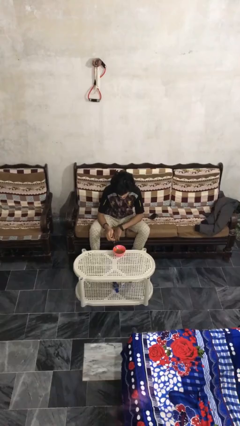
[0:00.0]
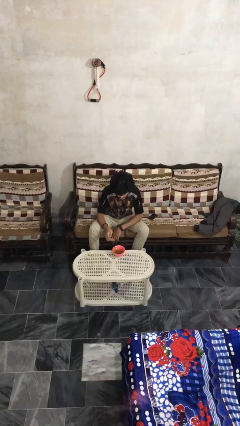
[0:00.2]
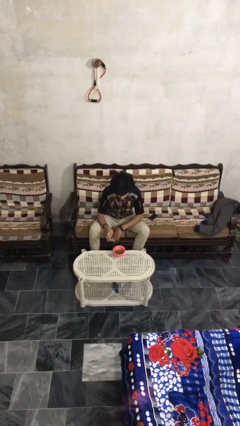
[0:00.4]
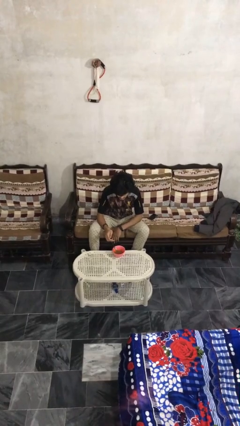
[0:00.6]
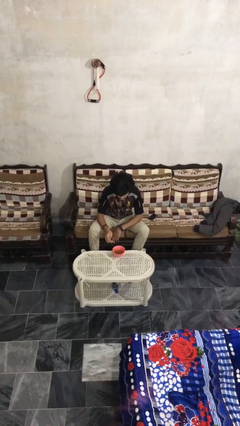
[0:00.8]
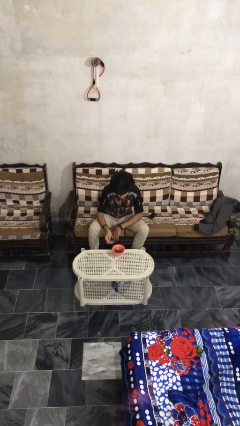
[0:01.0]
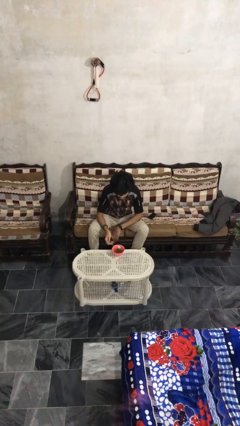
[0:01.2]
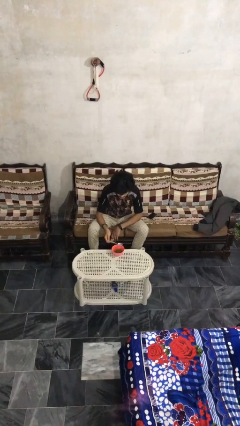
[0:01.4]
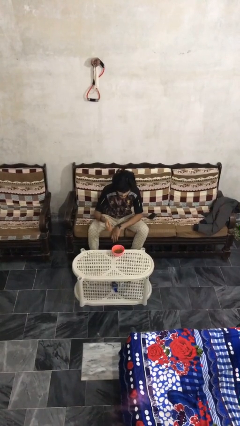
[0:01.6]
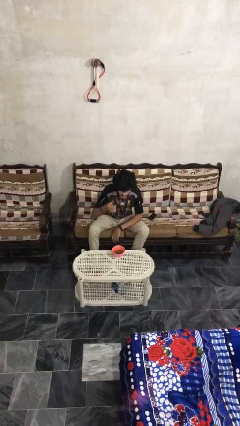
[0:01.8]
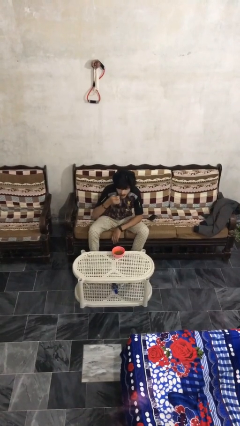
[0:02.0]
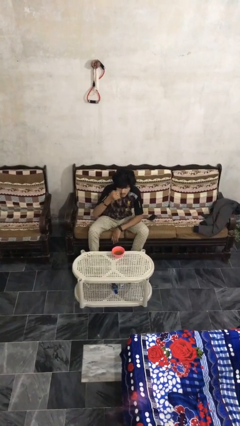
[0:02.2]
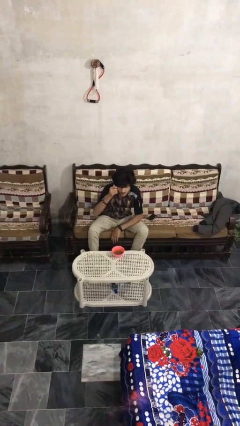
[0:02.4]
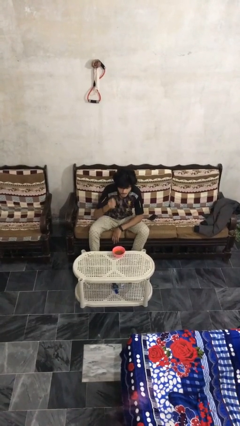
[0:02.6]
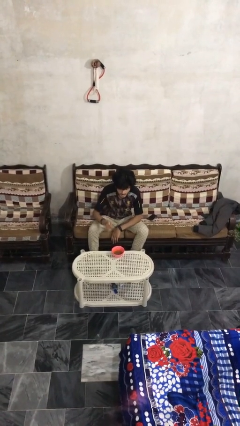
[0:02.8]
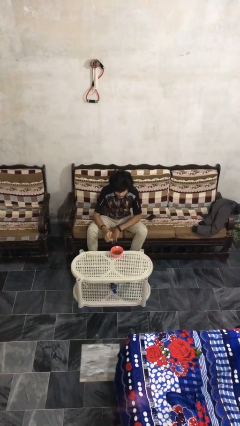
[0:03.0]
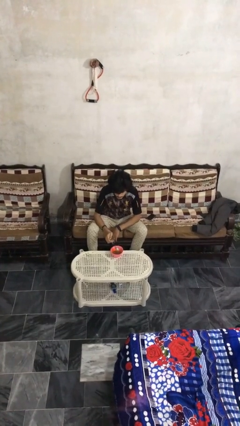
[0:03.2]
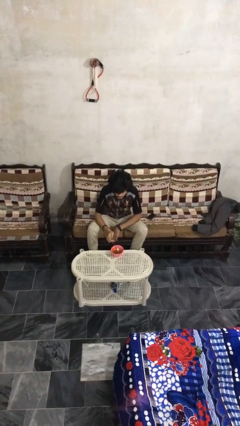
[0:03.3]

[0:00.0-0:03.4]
person eats with utensil

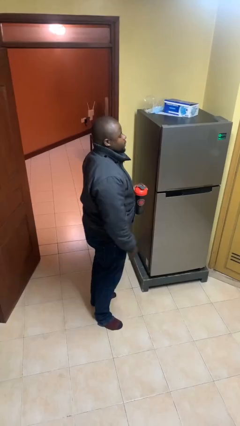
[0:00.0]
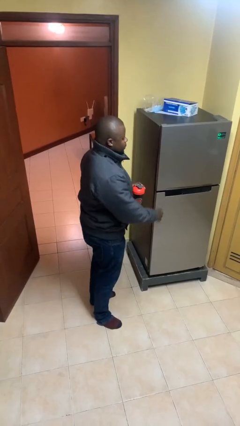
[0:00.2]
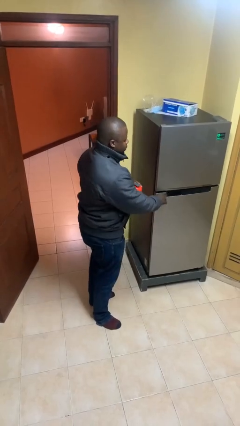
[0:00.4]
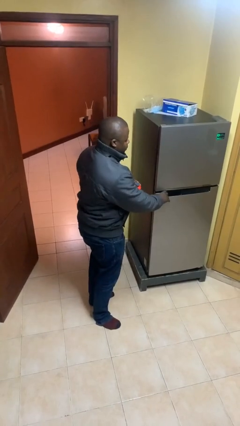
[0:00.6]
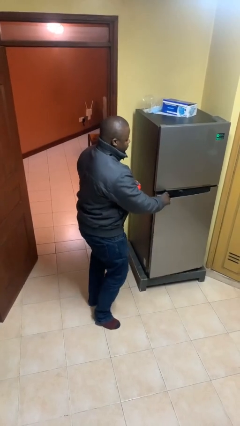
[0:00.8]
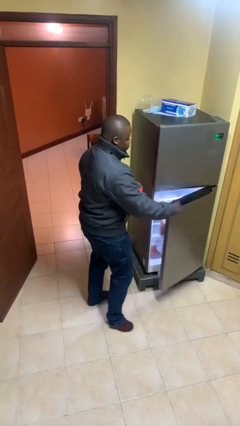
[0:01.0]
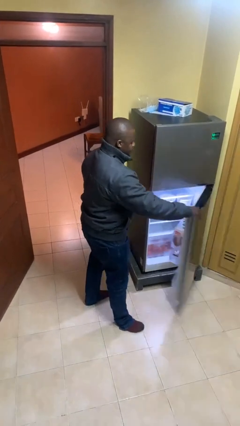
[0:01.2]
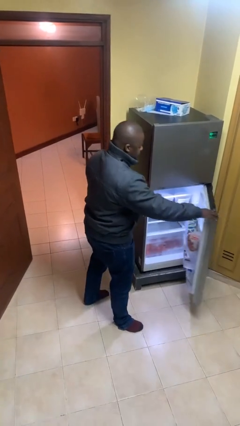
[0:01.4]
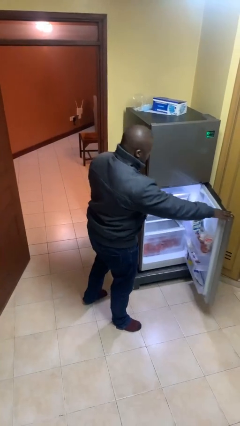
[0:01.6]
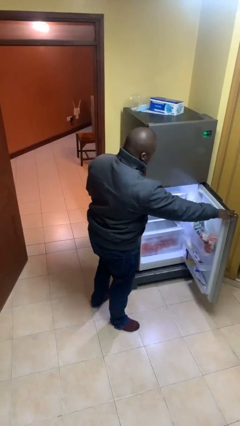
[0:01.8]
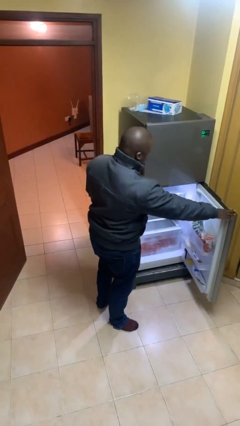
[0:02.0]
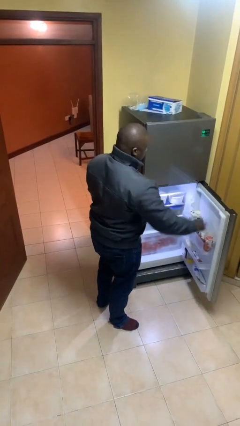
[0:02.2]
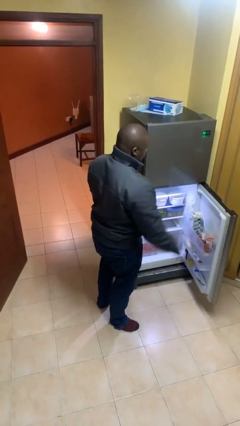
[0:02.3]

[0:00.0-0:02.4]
person opens refrigerator

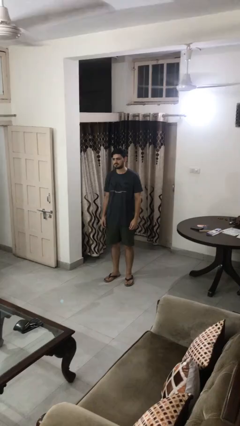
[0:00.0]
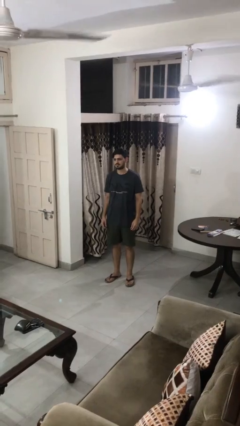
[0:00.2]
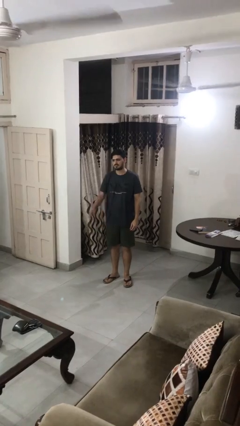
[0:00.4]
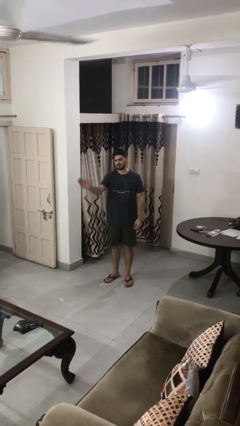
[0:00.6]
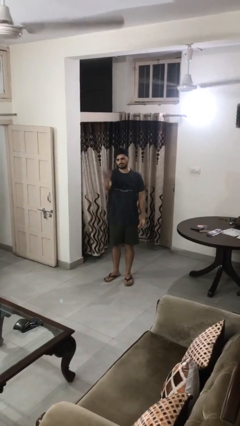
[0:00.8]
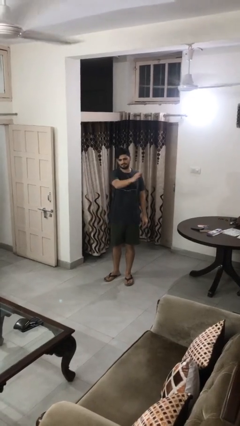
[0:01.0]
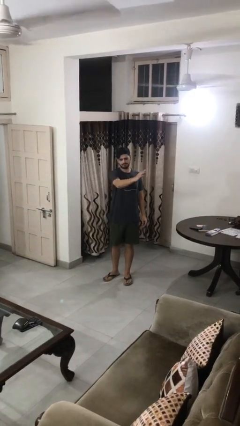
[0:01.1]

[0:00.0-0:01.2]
person gestures swipe left

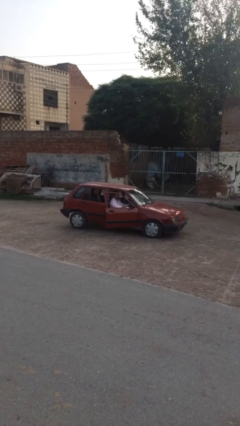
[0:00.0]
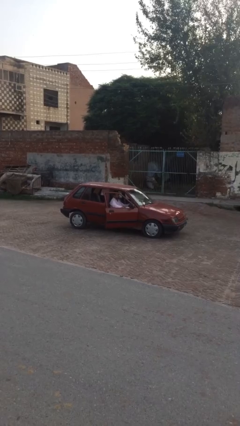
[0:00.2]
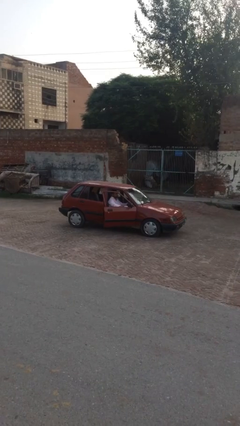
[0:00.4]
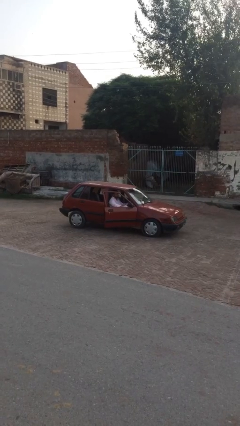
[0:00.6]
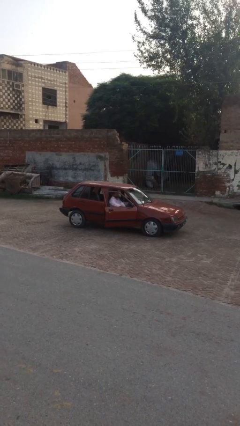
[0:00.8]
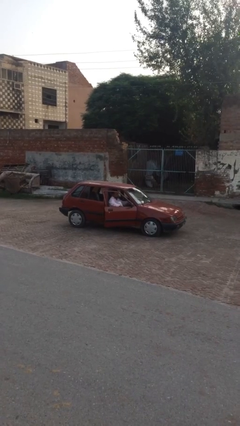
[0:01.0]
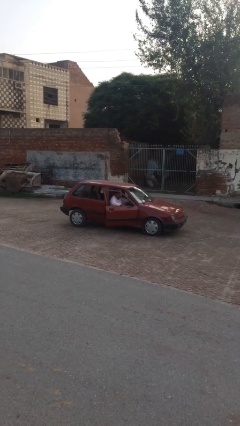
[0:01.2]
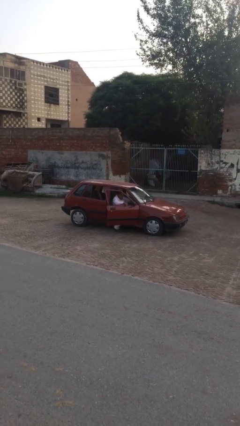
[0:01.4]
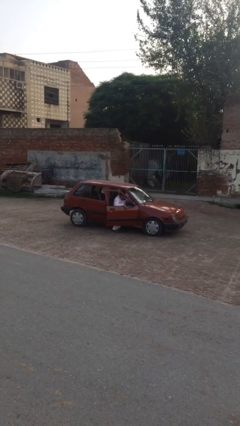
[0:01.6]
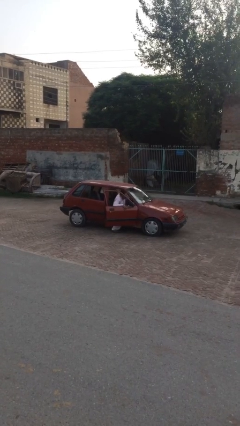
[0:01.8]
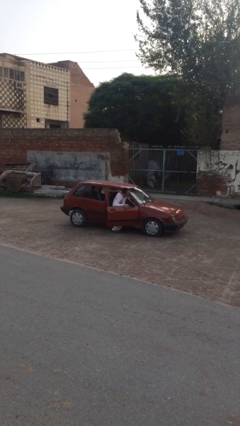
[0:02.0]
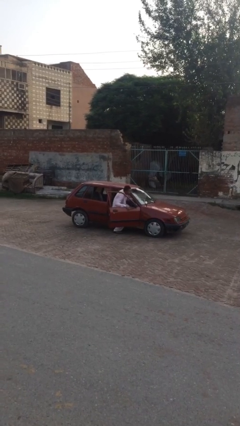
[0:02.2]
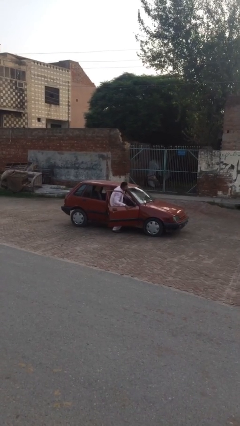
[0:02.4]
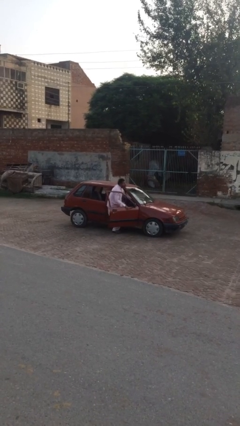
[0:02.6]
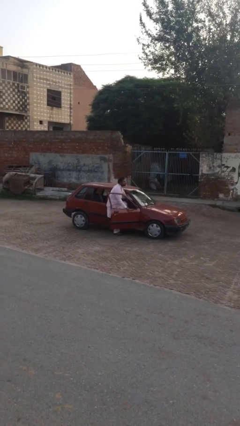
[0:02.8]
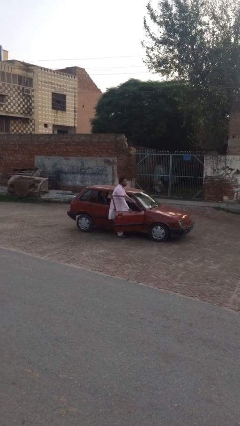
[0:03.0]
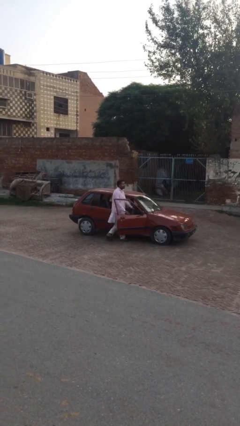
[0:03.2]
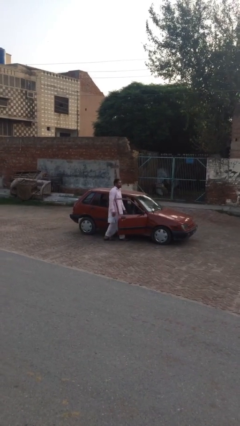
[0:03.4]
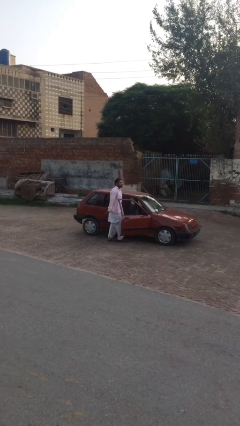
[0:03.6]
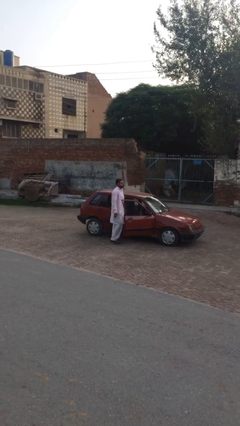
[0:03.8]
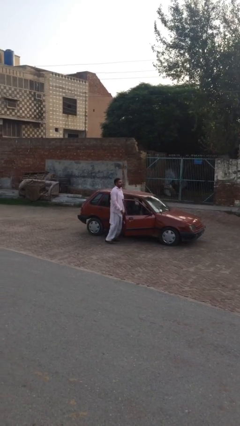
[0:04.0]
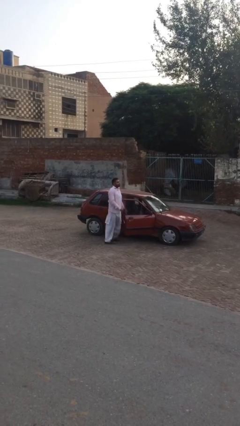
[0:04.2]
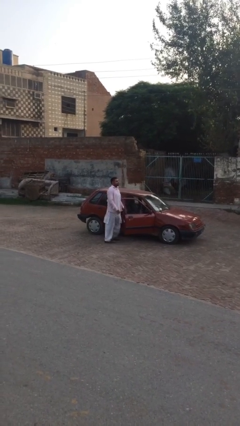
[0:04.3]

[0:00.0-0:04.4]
person exits car

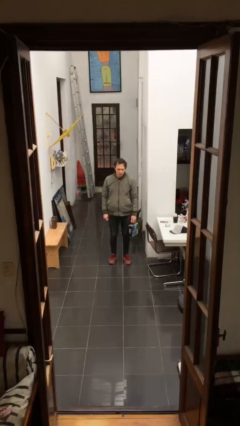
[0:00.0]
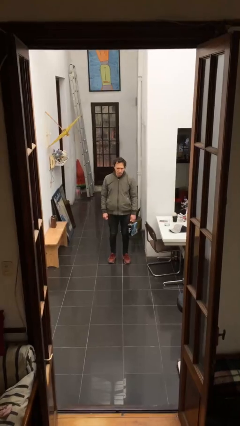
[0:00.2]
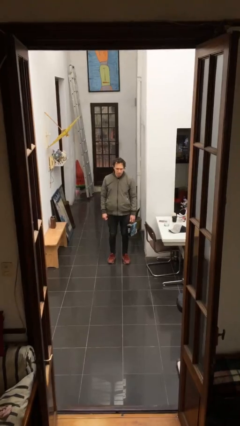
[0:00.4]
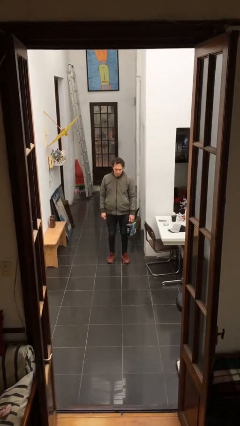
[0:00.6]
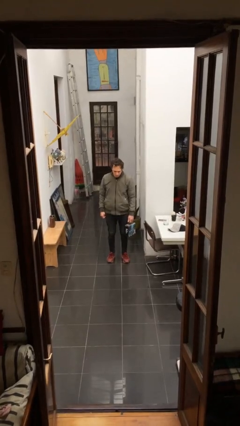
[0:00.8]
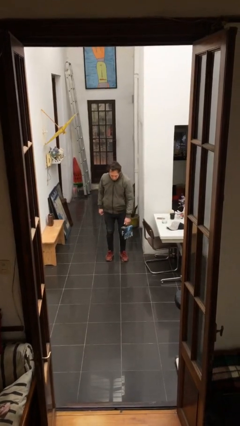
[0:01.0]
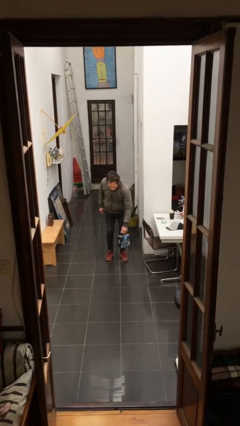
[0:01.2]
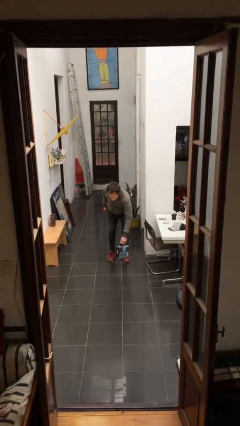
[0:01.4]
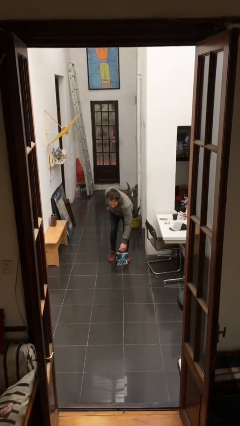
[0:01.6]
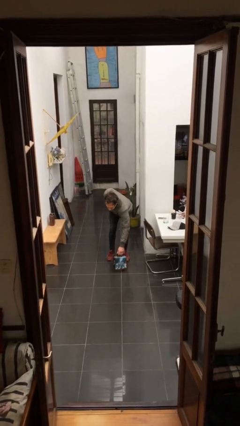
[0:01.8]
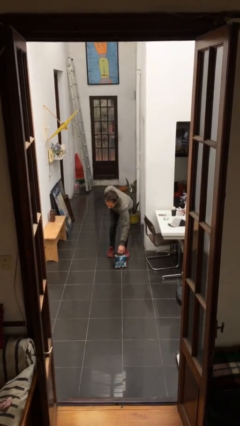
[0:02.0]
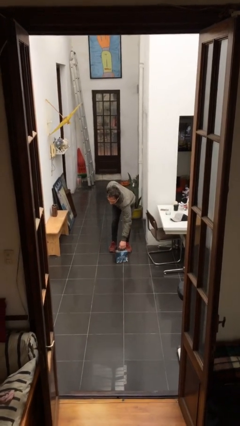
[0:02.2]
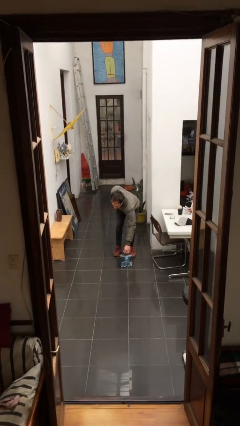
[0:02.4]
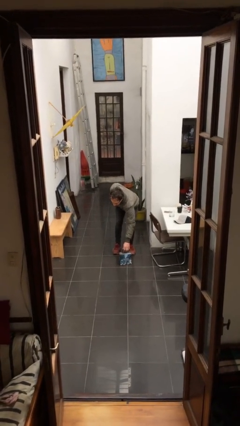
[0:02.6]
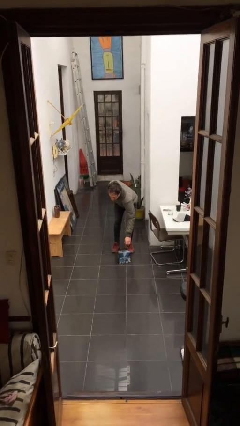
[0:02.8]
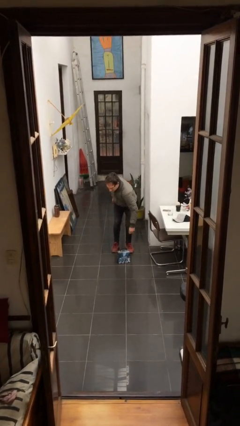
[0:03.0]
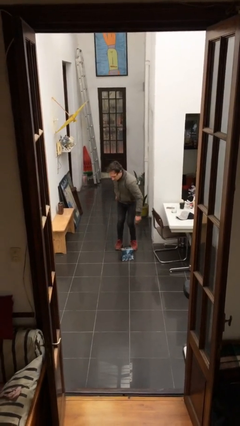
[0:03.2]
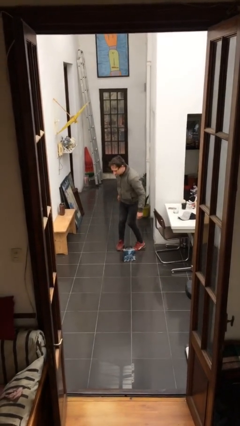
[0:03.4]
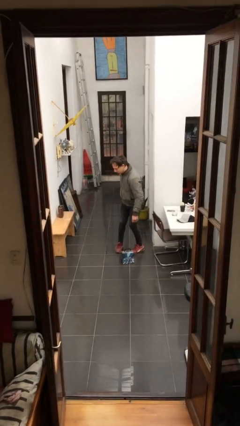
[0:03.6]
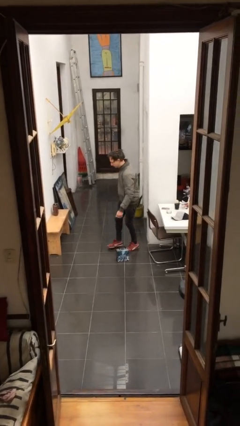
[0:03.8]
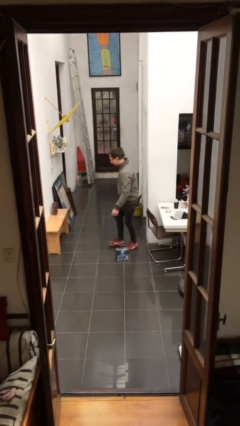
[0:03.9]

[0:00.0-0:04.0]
person puts down object on floor

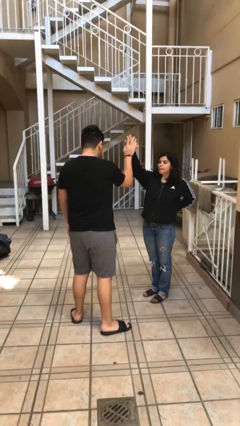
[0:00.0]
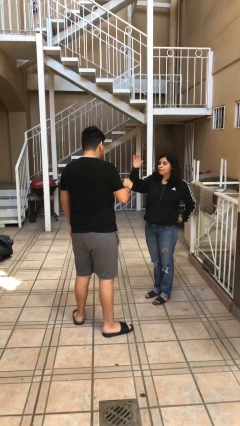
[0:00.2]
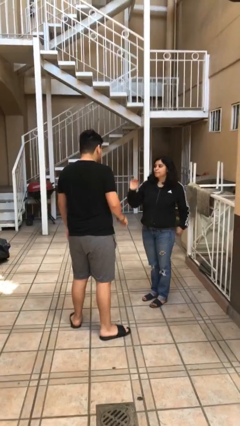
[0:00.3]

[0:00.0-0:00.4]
person highfives hand

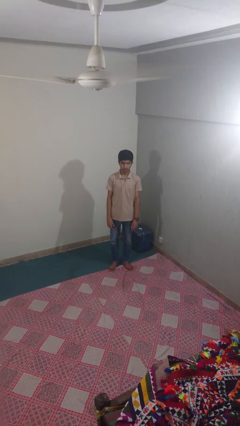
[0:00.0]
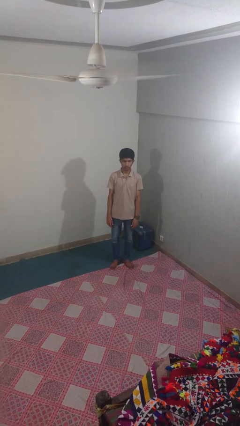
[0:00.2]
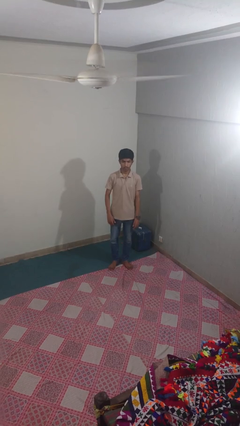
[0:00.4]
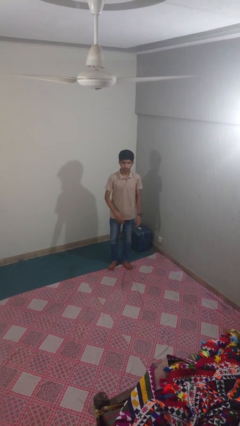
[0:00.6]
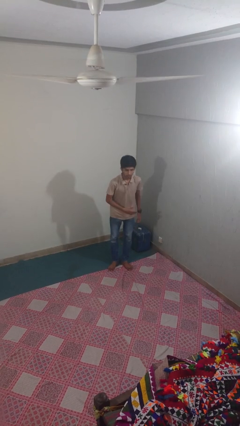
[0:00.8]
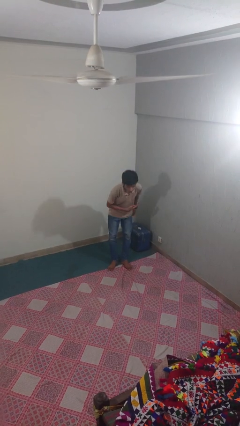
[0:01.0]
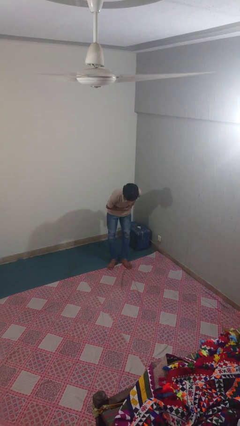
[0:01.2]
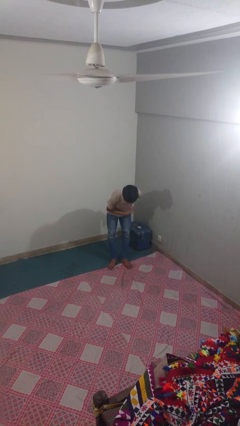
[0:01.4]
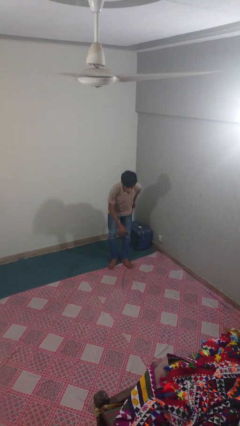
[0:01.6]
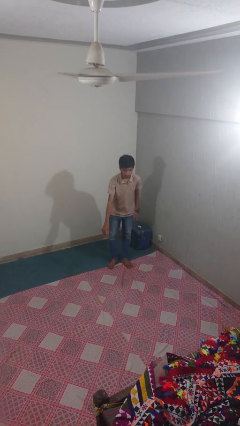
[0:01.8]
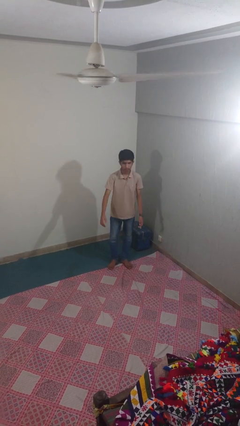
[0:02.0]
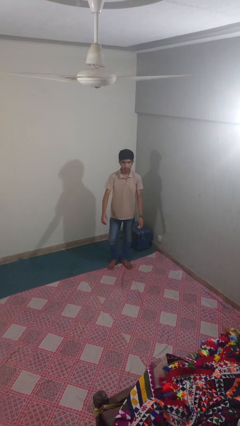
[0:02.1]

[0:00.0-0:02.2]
person bows
